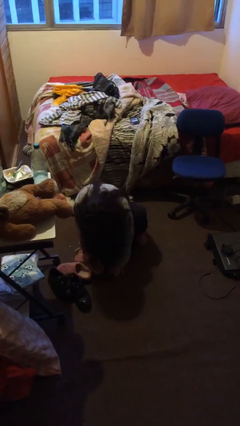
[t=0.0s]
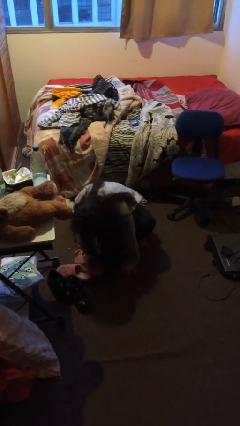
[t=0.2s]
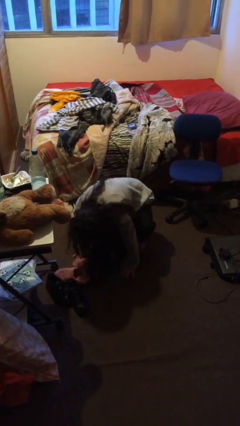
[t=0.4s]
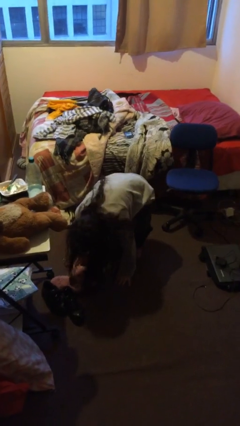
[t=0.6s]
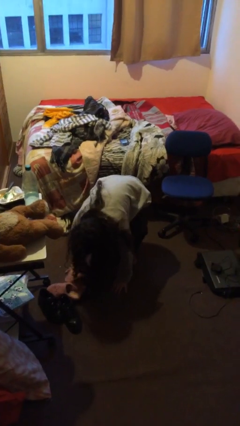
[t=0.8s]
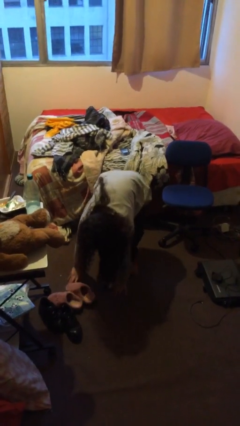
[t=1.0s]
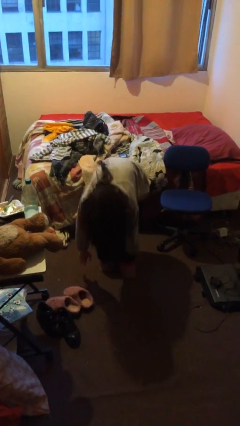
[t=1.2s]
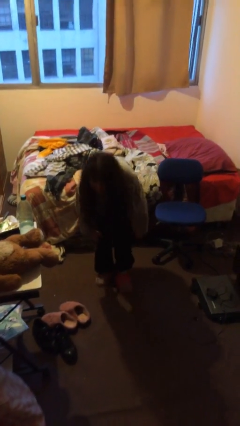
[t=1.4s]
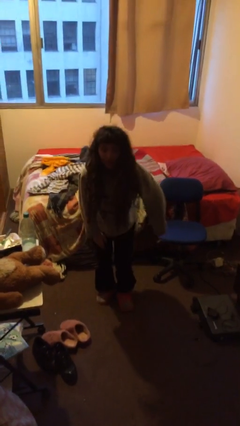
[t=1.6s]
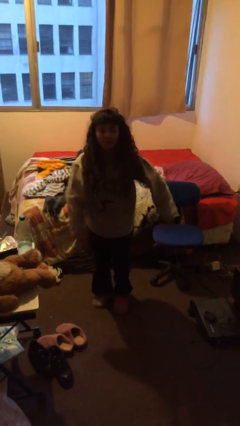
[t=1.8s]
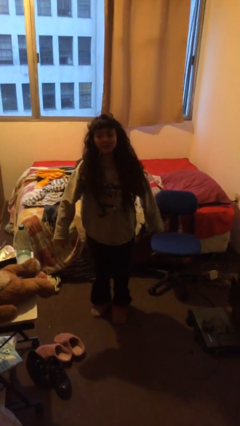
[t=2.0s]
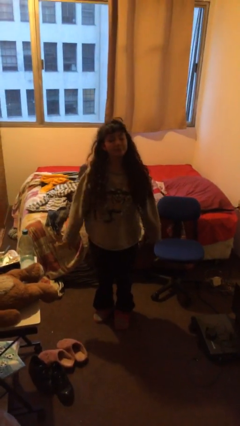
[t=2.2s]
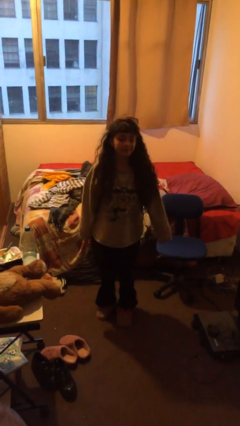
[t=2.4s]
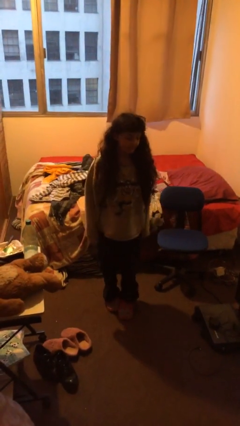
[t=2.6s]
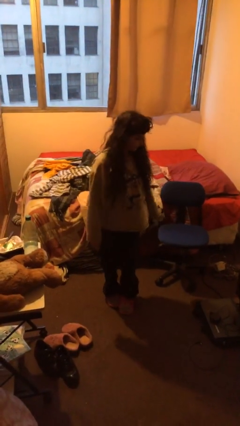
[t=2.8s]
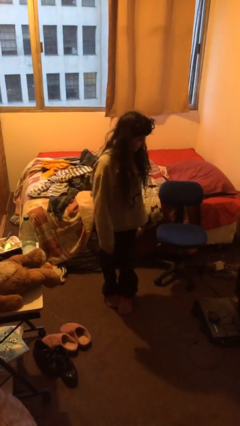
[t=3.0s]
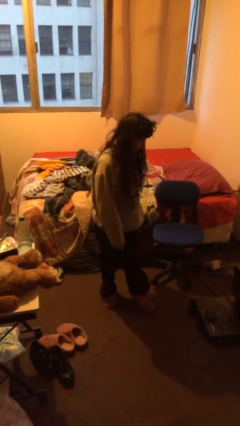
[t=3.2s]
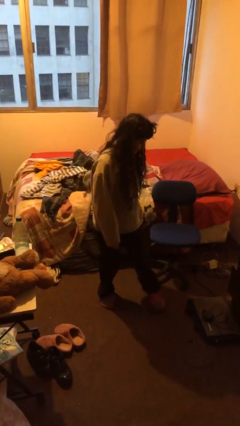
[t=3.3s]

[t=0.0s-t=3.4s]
person stands up from floor

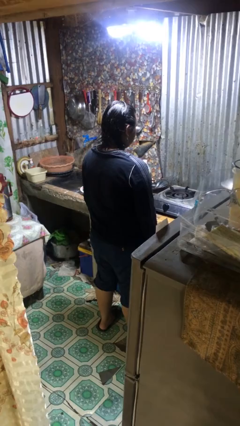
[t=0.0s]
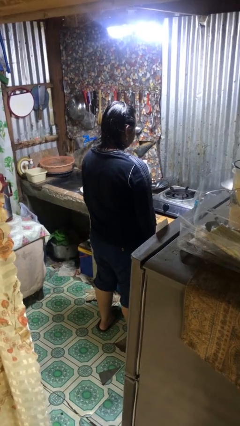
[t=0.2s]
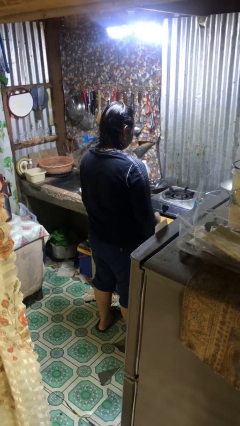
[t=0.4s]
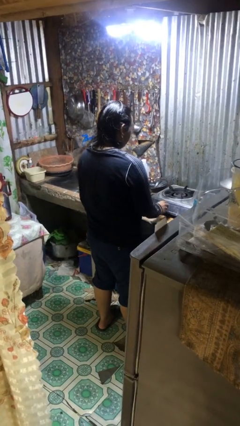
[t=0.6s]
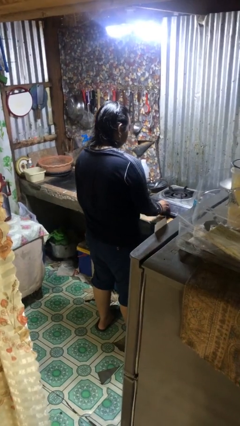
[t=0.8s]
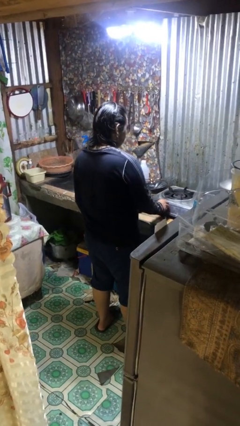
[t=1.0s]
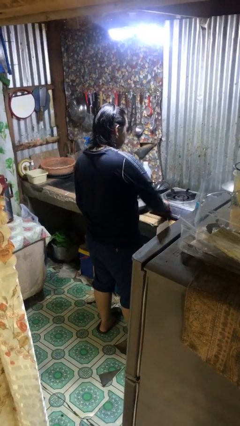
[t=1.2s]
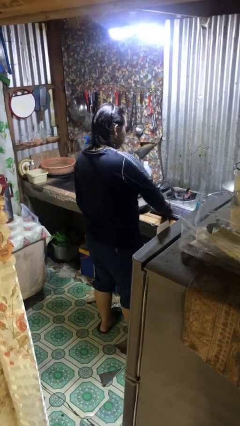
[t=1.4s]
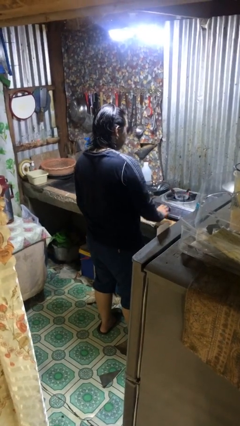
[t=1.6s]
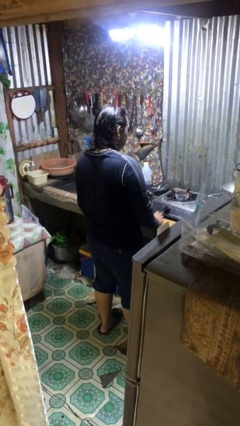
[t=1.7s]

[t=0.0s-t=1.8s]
person turns on stovetop

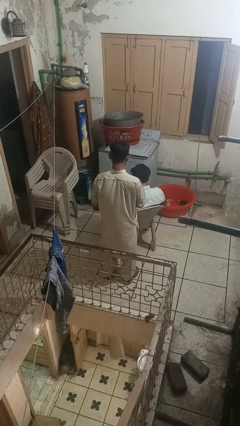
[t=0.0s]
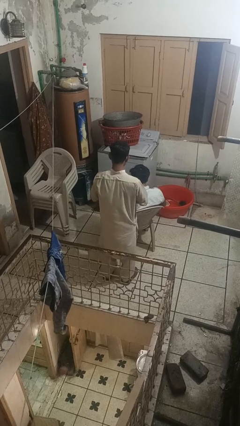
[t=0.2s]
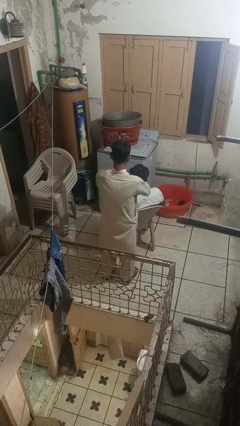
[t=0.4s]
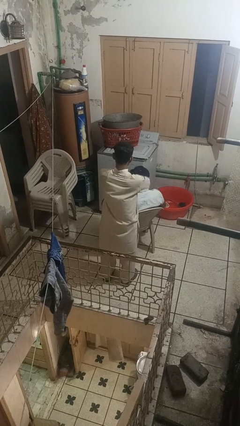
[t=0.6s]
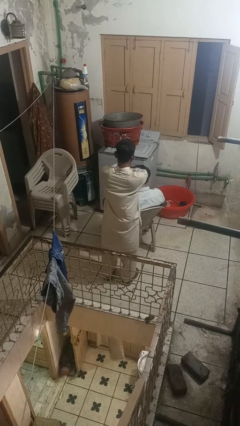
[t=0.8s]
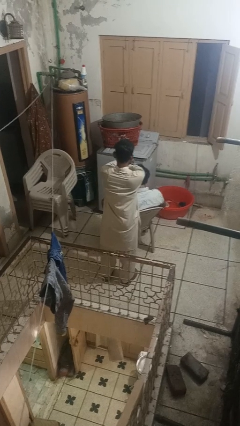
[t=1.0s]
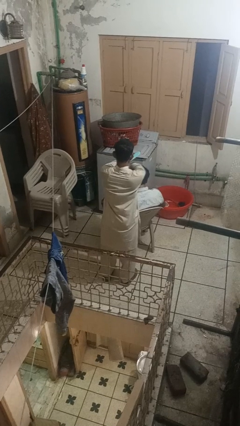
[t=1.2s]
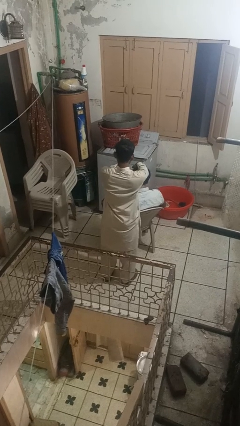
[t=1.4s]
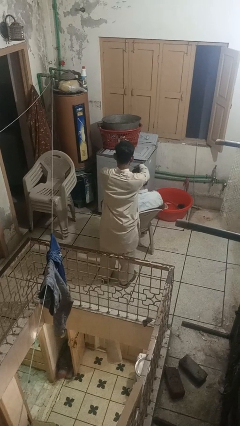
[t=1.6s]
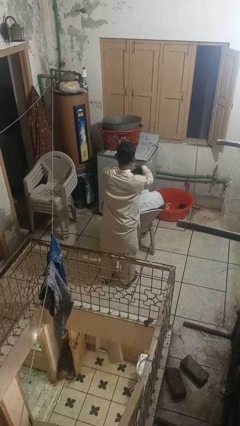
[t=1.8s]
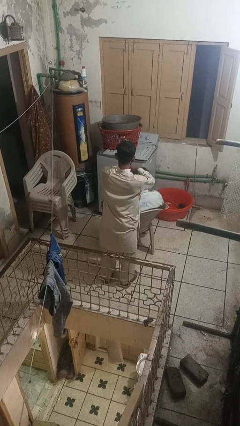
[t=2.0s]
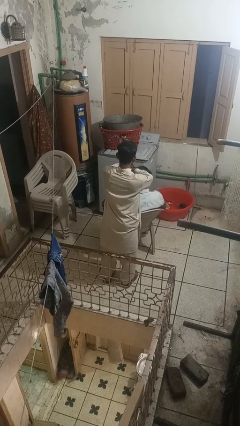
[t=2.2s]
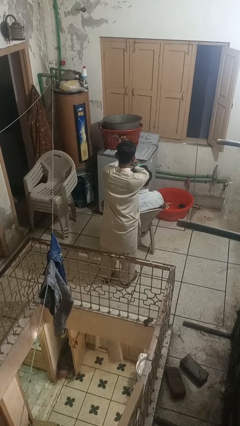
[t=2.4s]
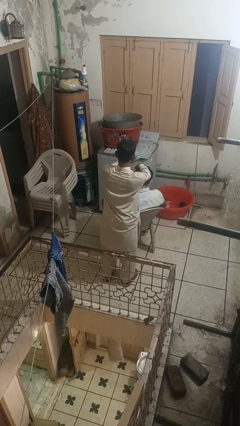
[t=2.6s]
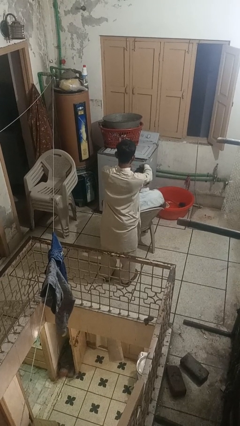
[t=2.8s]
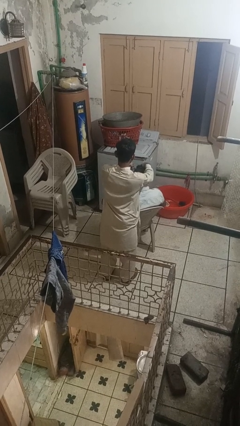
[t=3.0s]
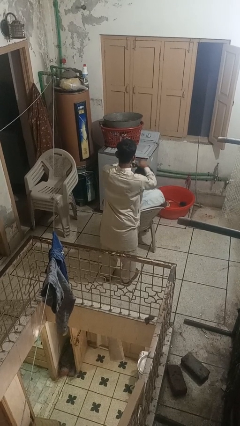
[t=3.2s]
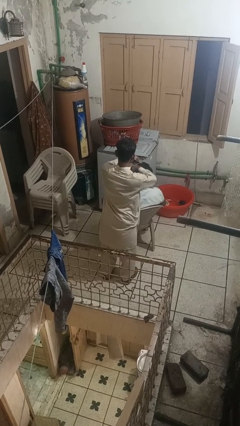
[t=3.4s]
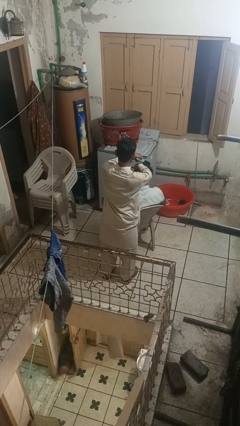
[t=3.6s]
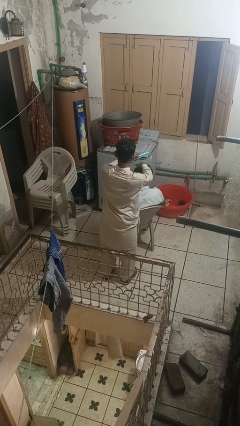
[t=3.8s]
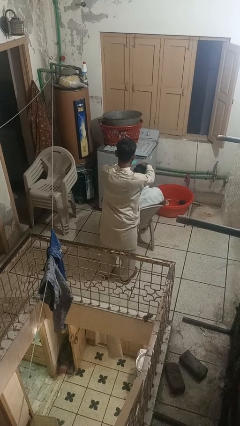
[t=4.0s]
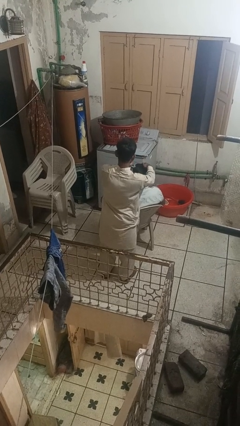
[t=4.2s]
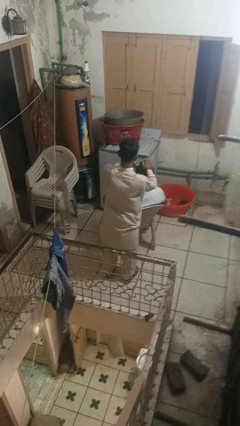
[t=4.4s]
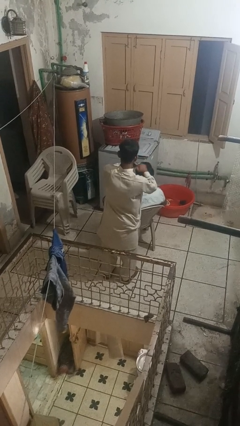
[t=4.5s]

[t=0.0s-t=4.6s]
person brushes hair of person

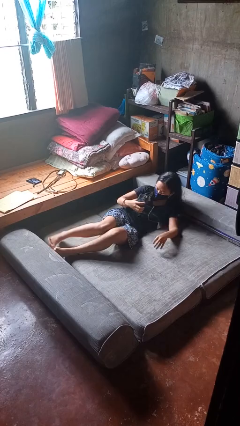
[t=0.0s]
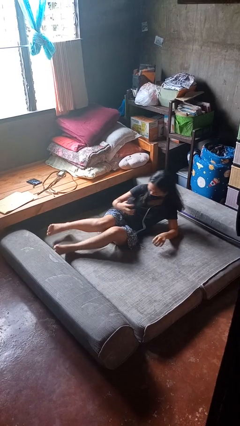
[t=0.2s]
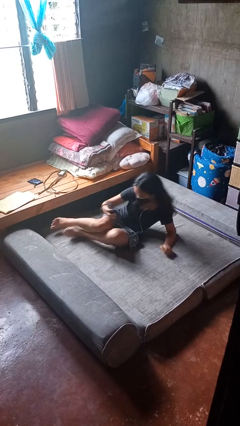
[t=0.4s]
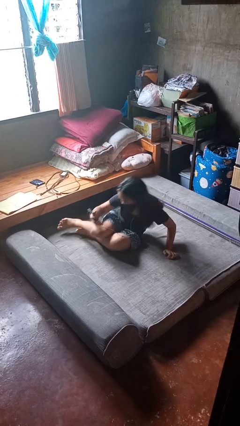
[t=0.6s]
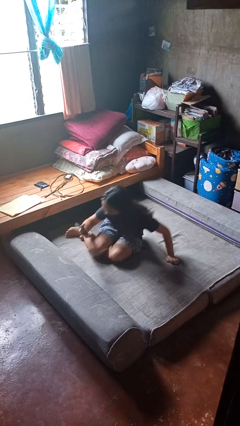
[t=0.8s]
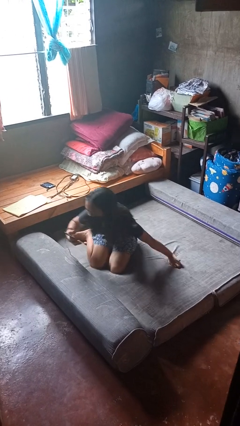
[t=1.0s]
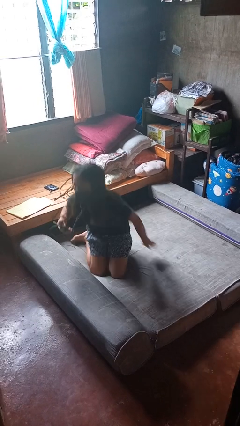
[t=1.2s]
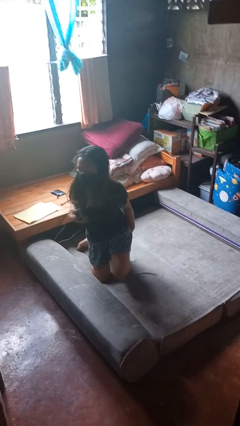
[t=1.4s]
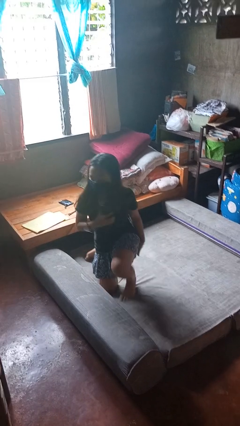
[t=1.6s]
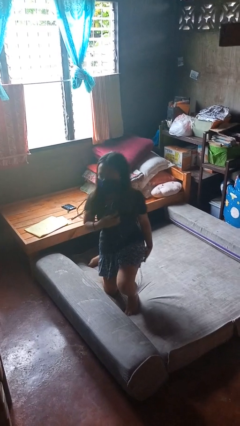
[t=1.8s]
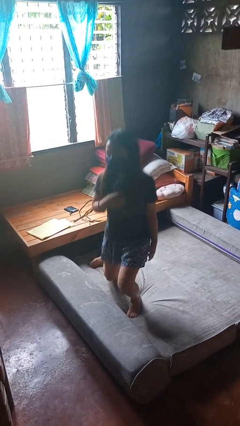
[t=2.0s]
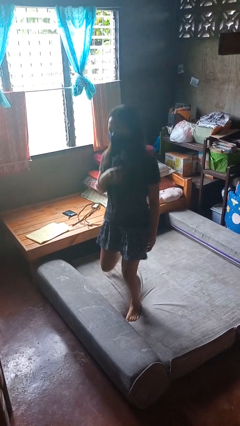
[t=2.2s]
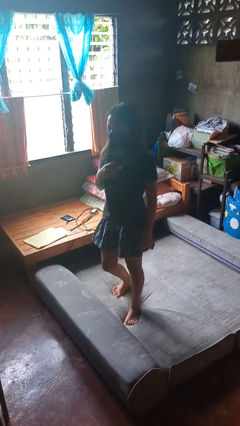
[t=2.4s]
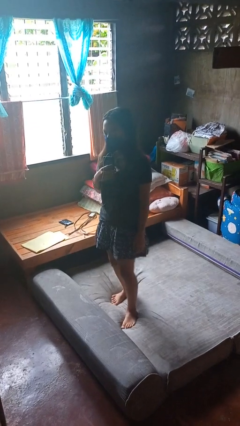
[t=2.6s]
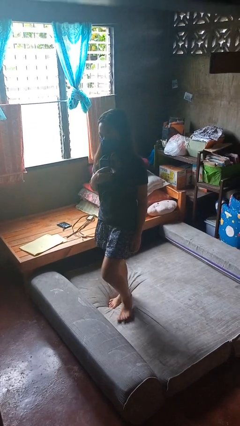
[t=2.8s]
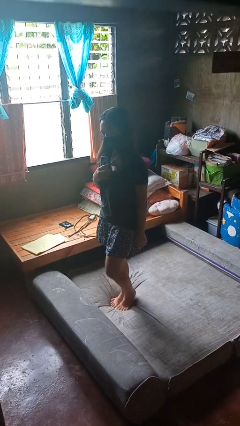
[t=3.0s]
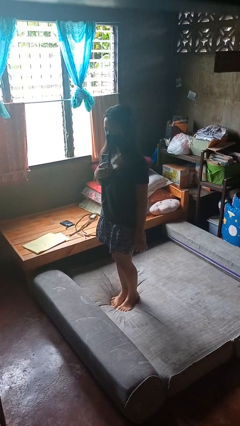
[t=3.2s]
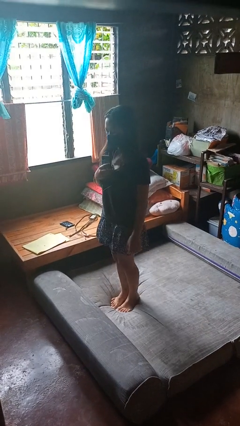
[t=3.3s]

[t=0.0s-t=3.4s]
person stands up

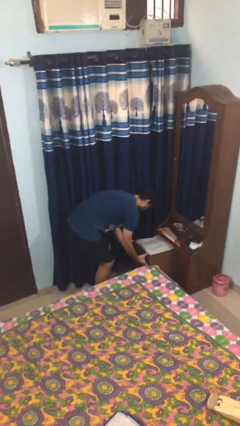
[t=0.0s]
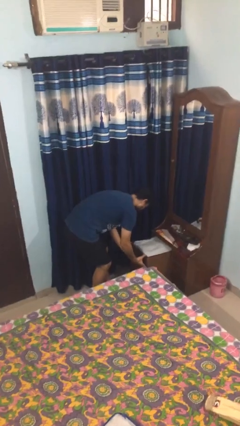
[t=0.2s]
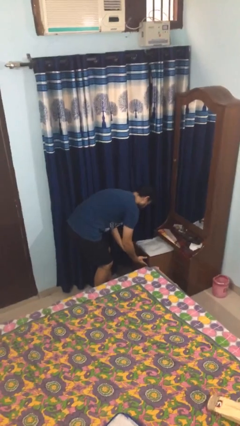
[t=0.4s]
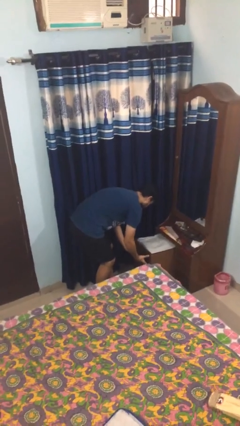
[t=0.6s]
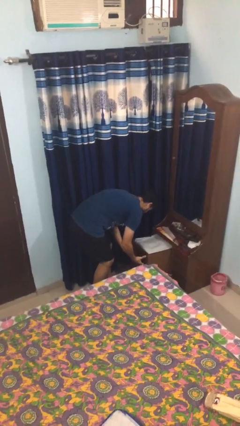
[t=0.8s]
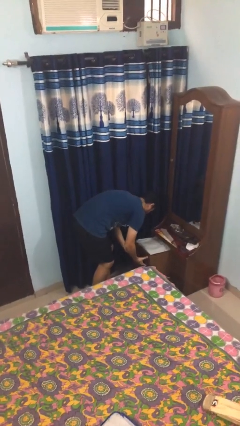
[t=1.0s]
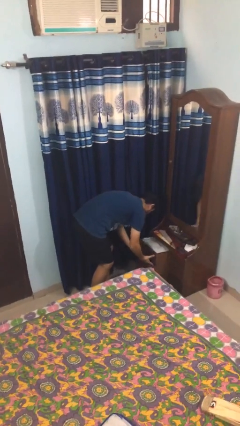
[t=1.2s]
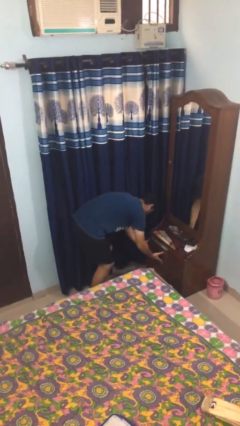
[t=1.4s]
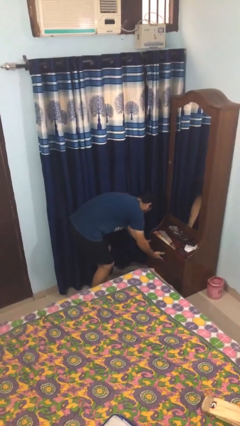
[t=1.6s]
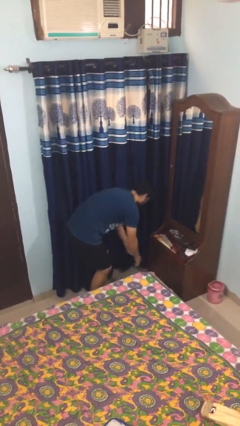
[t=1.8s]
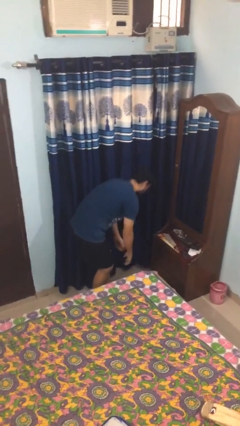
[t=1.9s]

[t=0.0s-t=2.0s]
person closes dresser drawer

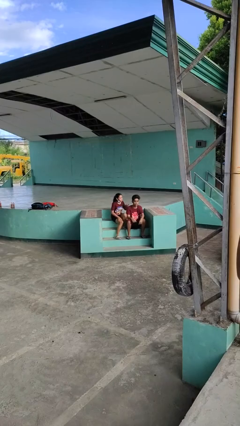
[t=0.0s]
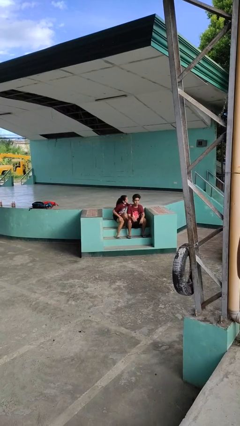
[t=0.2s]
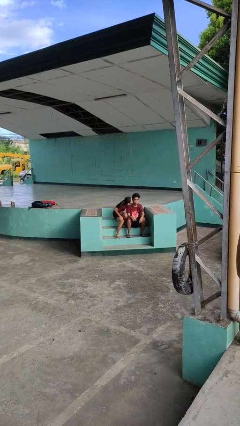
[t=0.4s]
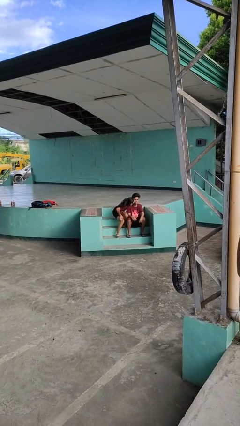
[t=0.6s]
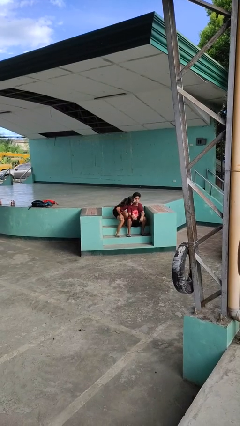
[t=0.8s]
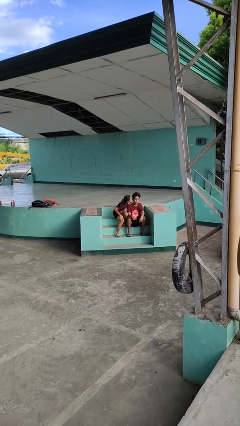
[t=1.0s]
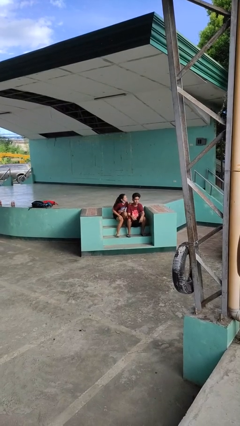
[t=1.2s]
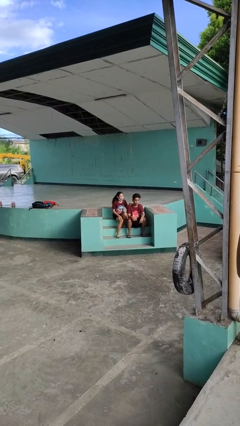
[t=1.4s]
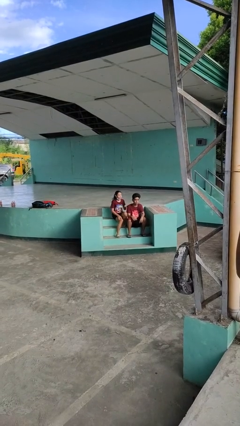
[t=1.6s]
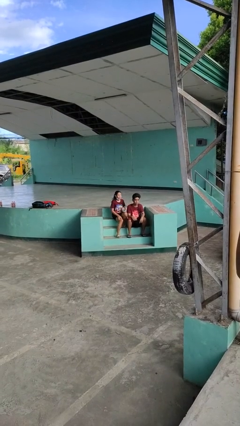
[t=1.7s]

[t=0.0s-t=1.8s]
person kisses cheek of person
